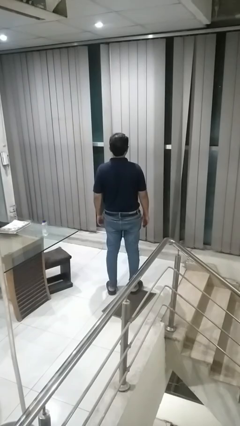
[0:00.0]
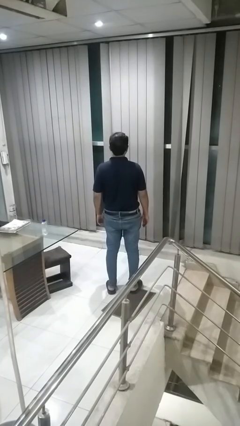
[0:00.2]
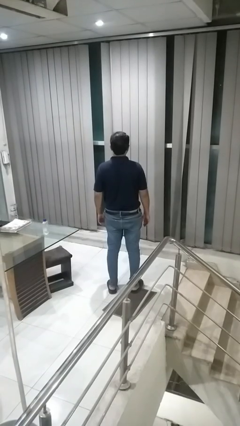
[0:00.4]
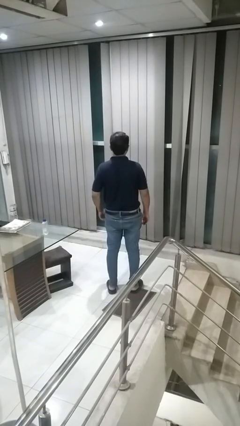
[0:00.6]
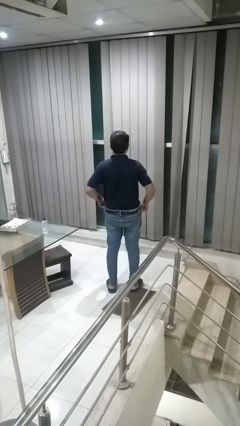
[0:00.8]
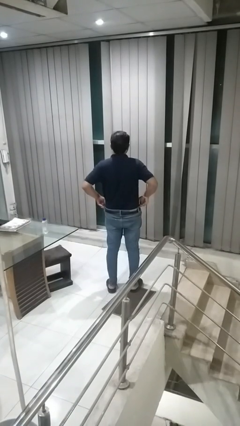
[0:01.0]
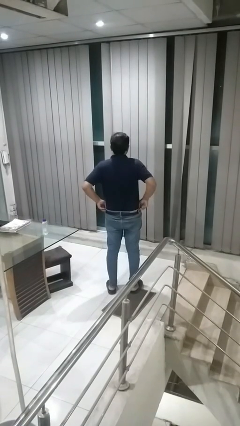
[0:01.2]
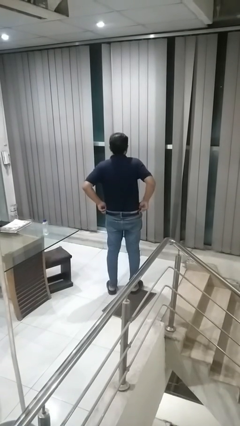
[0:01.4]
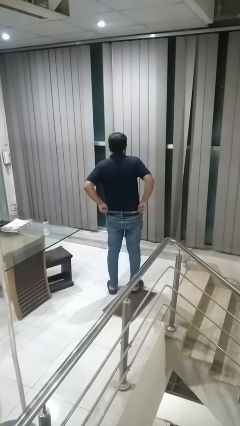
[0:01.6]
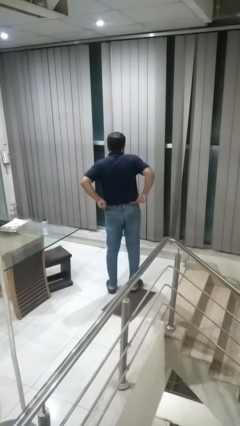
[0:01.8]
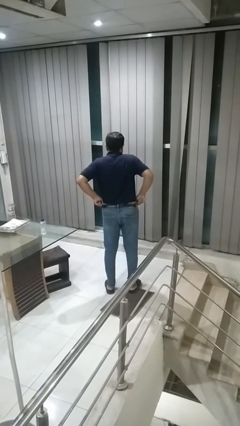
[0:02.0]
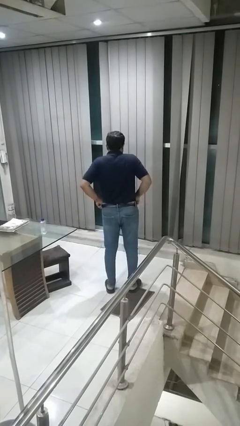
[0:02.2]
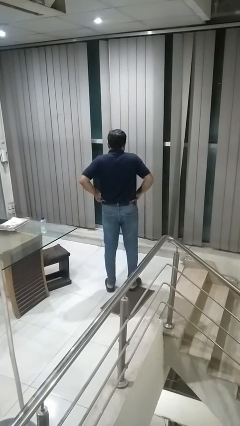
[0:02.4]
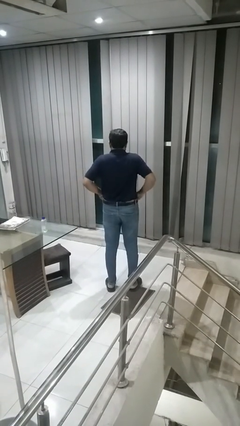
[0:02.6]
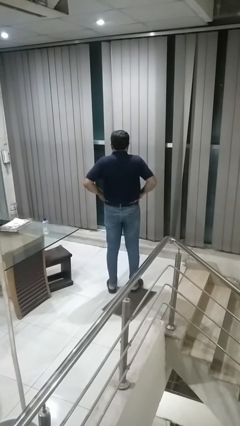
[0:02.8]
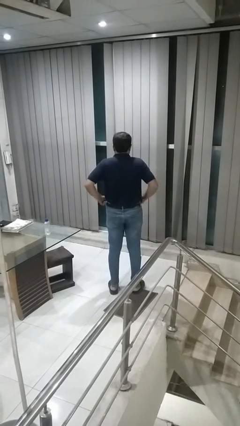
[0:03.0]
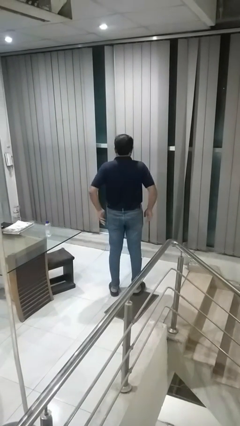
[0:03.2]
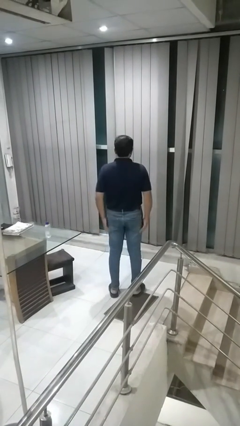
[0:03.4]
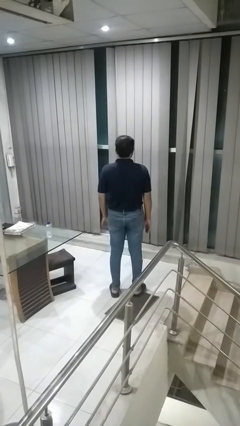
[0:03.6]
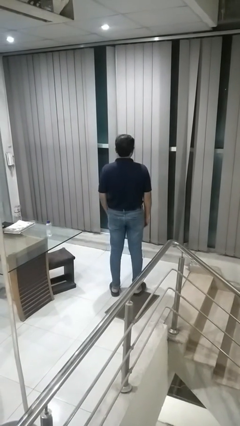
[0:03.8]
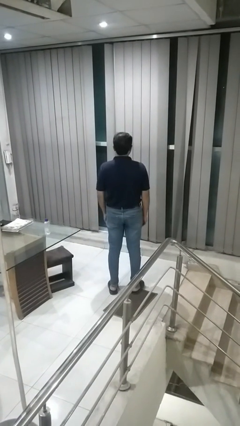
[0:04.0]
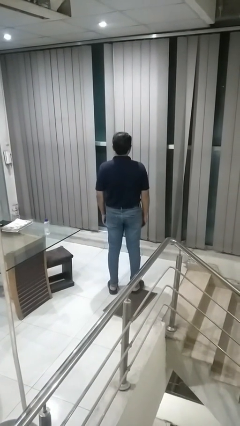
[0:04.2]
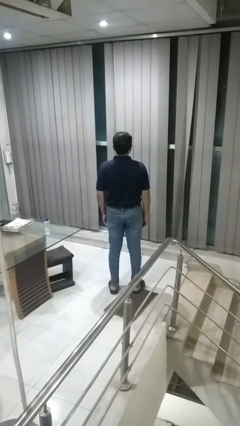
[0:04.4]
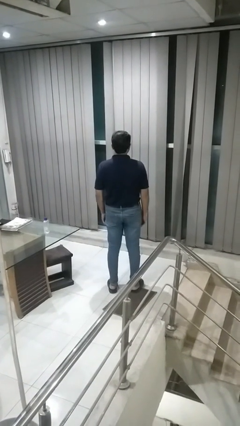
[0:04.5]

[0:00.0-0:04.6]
person hikes up pants

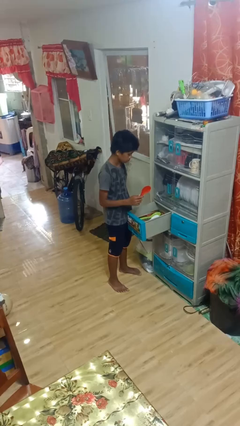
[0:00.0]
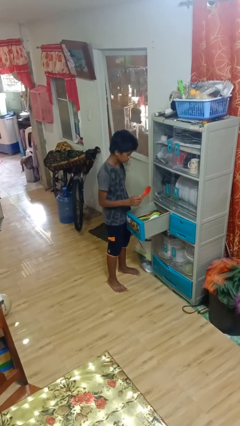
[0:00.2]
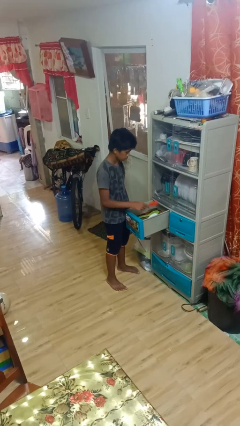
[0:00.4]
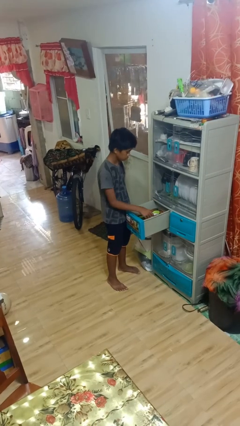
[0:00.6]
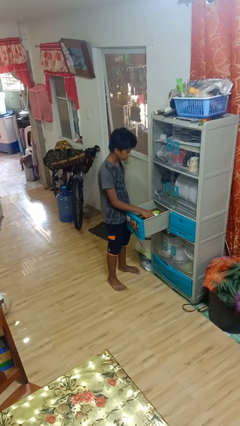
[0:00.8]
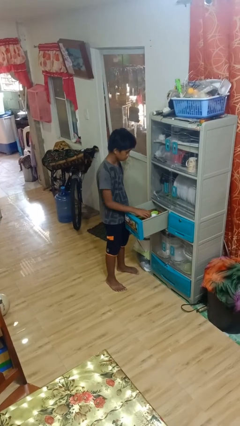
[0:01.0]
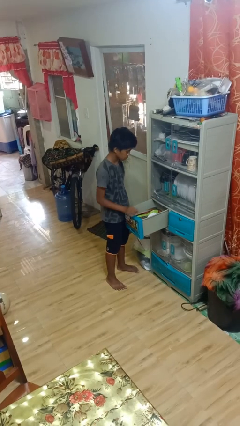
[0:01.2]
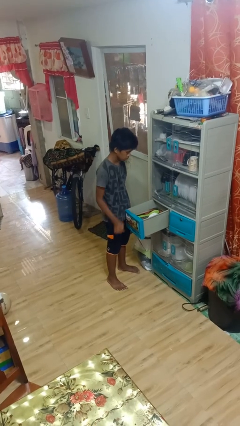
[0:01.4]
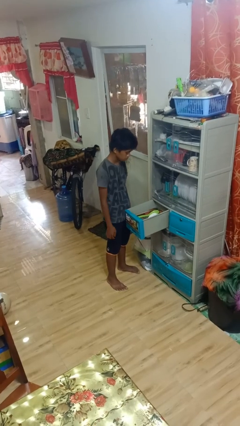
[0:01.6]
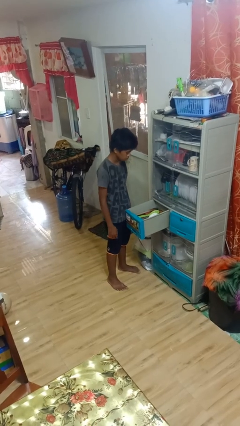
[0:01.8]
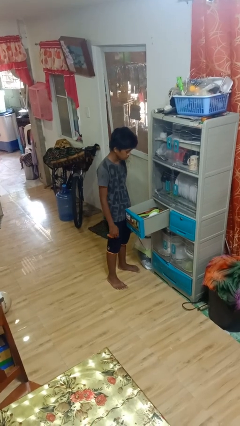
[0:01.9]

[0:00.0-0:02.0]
person puts object into kitchen drawer

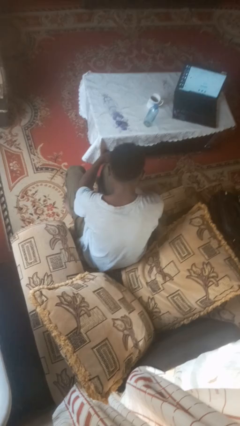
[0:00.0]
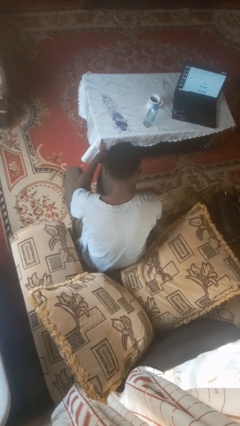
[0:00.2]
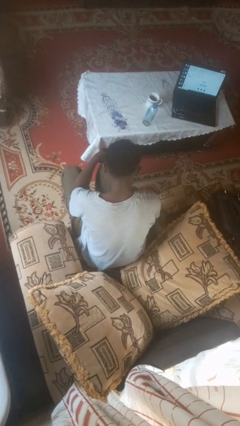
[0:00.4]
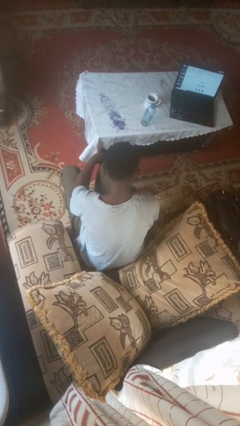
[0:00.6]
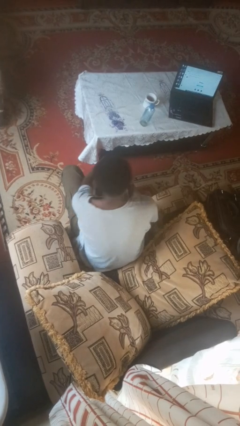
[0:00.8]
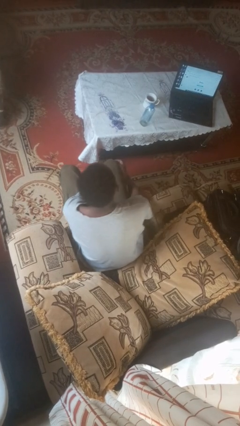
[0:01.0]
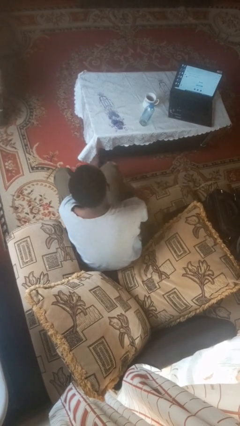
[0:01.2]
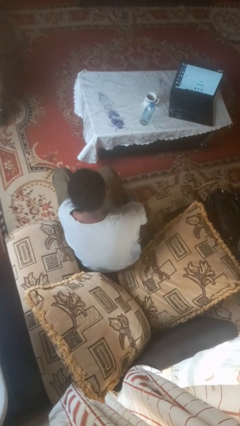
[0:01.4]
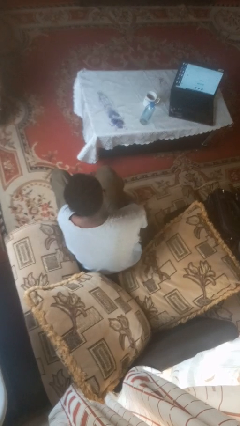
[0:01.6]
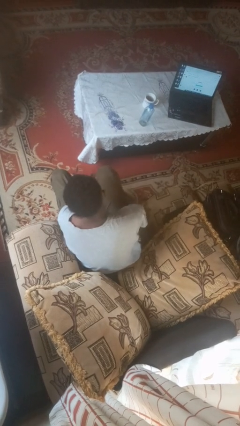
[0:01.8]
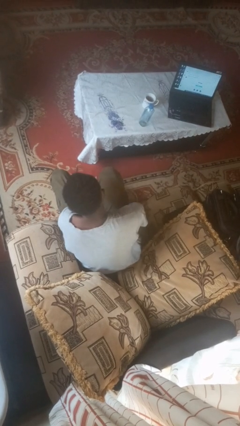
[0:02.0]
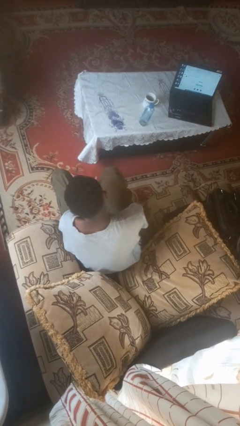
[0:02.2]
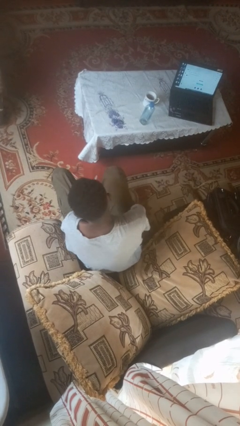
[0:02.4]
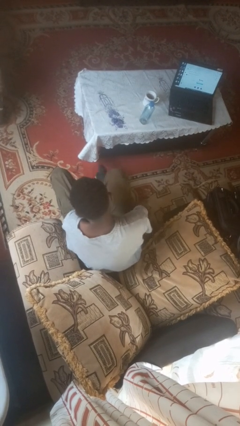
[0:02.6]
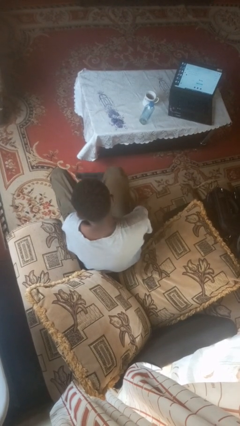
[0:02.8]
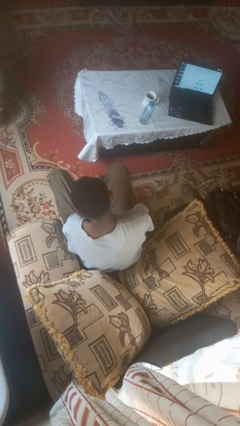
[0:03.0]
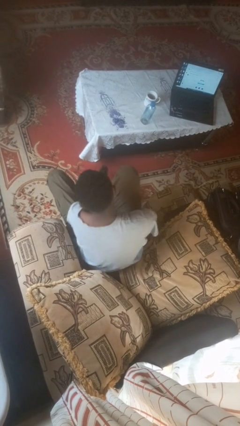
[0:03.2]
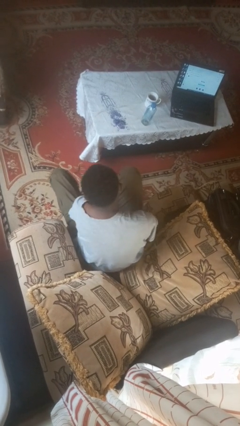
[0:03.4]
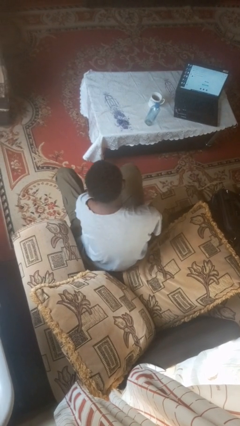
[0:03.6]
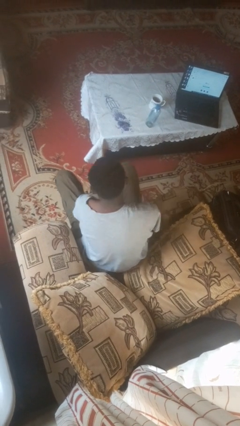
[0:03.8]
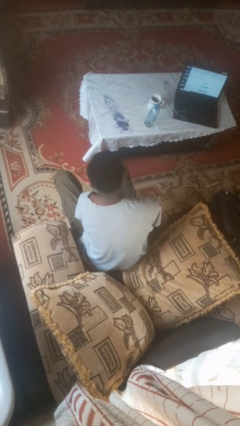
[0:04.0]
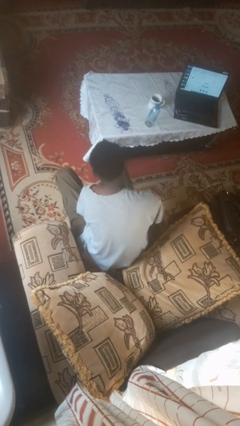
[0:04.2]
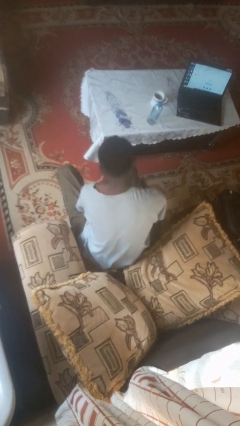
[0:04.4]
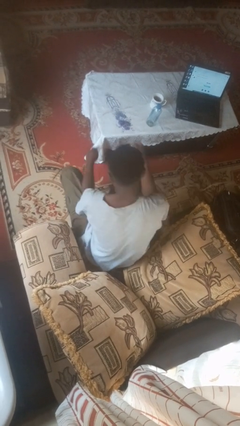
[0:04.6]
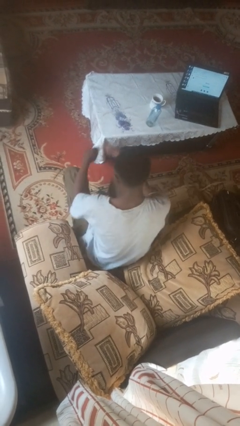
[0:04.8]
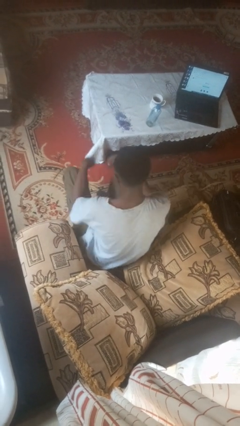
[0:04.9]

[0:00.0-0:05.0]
person puts on socks

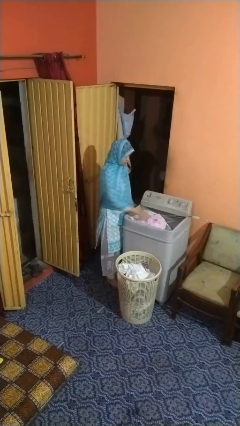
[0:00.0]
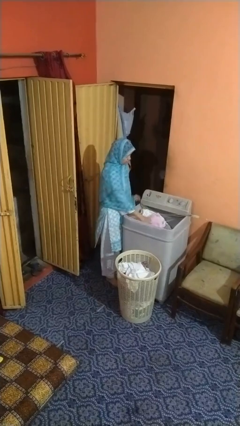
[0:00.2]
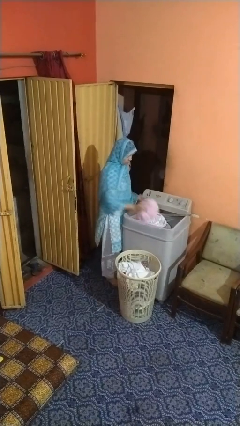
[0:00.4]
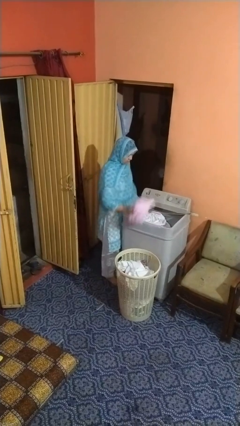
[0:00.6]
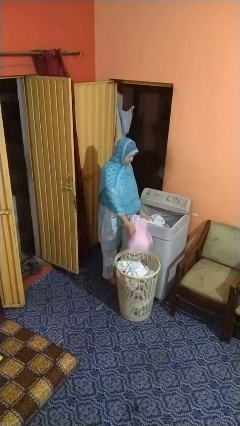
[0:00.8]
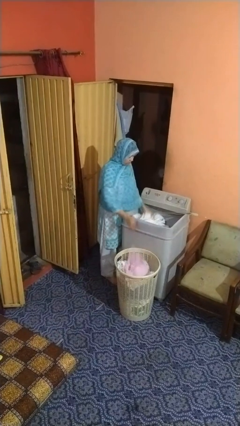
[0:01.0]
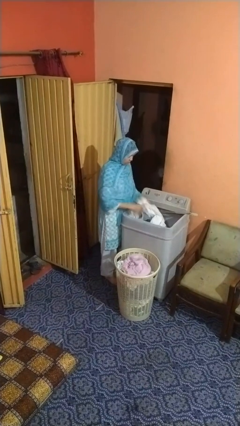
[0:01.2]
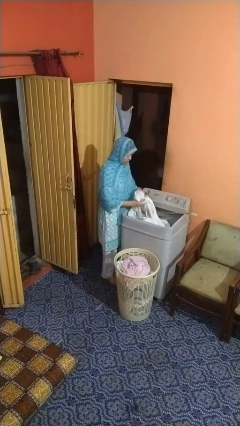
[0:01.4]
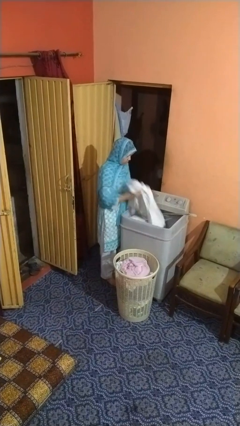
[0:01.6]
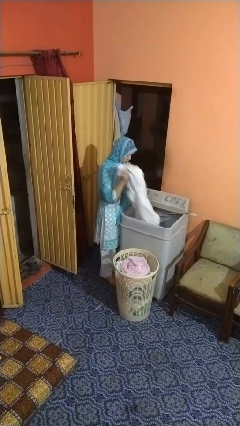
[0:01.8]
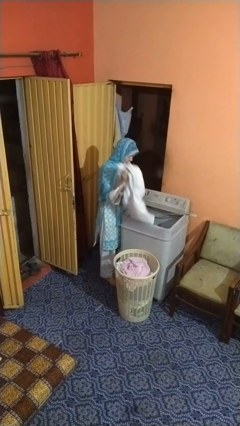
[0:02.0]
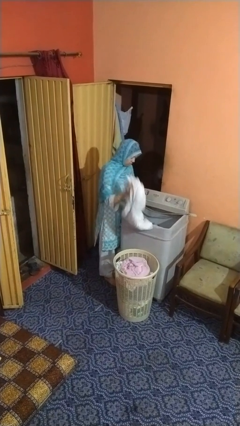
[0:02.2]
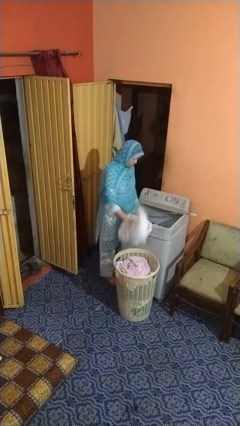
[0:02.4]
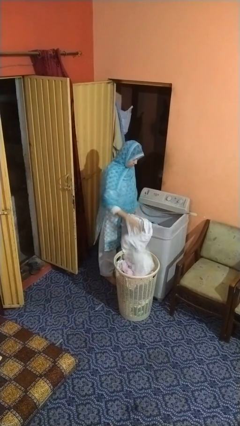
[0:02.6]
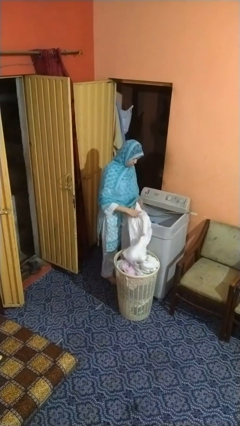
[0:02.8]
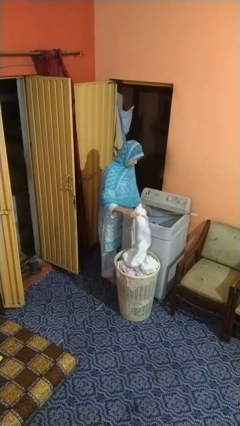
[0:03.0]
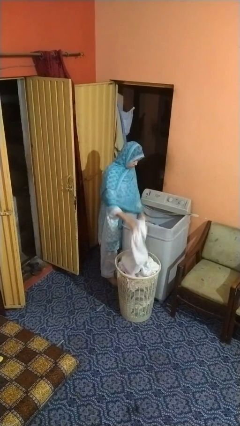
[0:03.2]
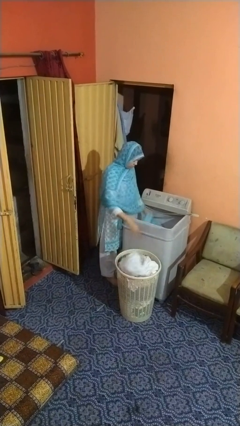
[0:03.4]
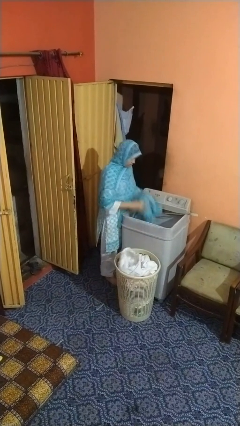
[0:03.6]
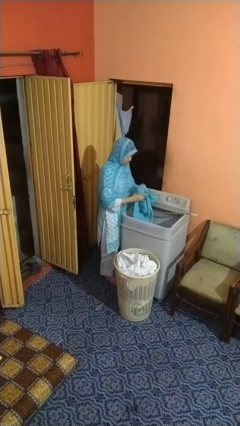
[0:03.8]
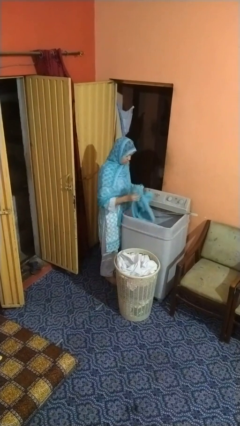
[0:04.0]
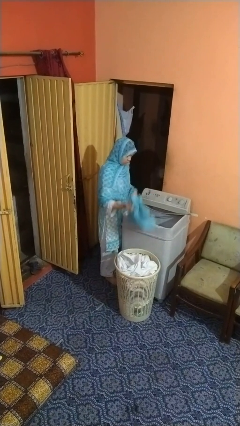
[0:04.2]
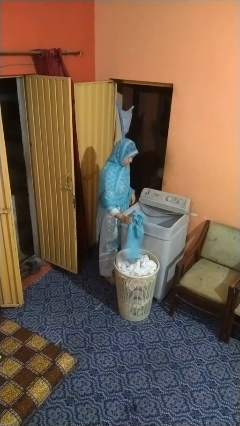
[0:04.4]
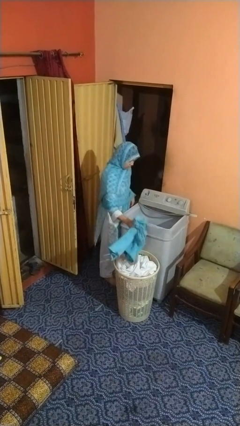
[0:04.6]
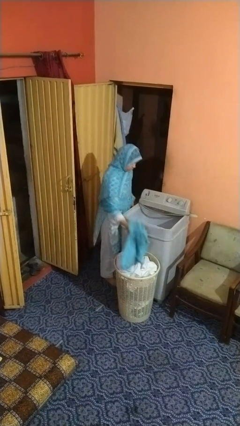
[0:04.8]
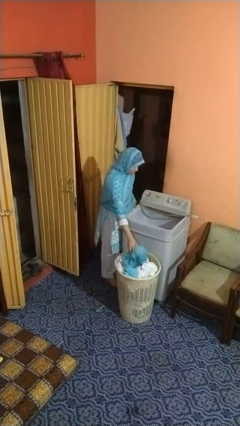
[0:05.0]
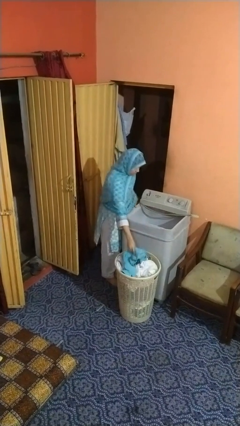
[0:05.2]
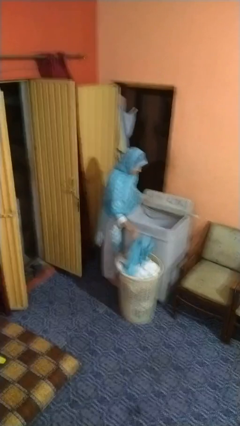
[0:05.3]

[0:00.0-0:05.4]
person unloads clotheswasher

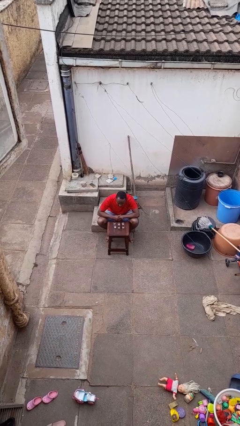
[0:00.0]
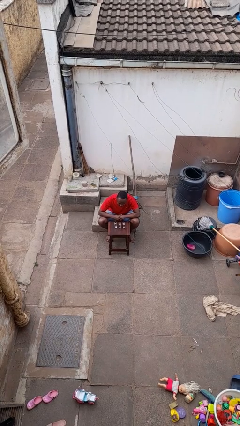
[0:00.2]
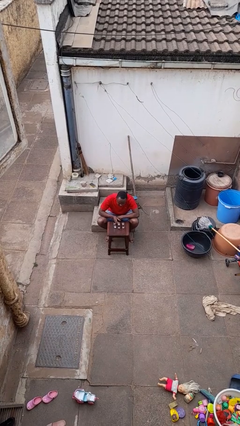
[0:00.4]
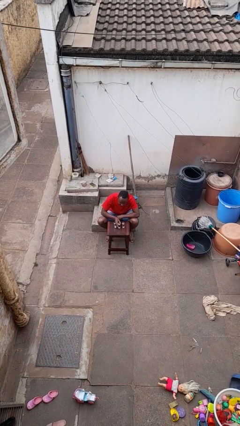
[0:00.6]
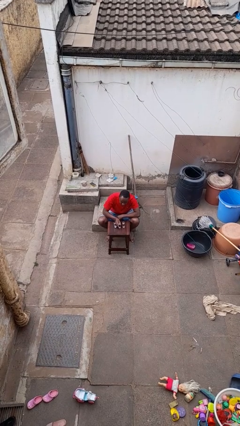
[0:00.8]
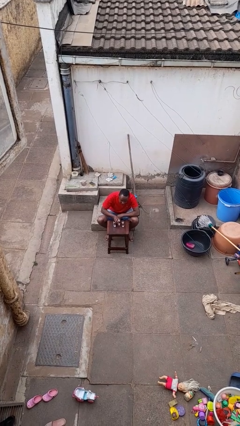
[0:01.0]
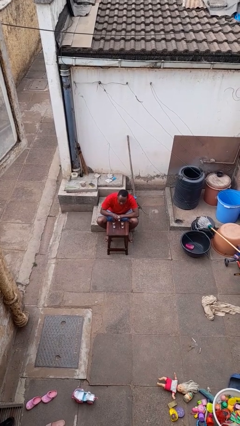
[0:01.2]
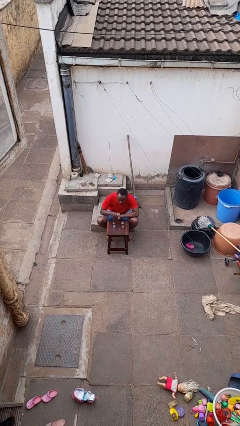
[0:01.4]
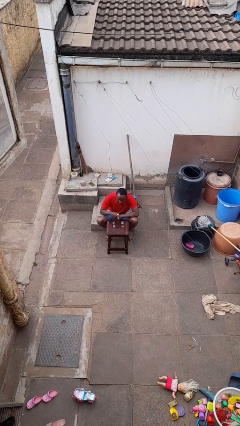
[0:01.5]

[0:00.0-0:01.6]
person picks up object from table
